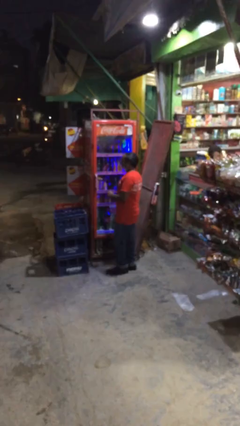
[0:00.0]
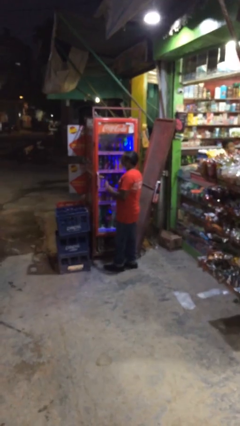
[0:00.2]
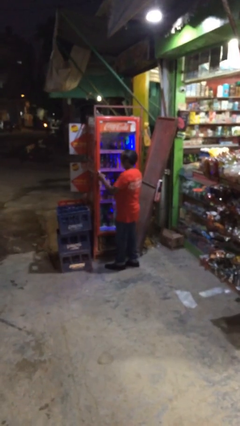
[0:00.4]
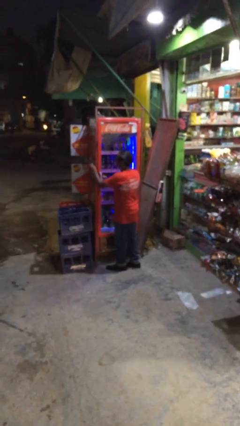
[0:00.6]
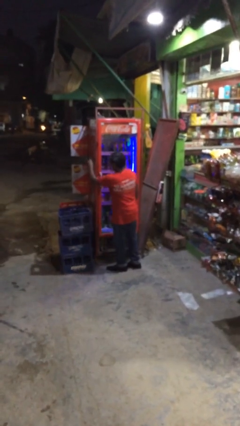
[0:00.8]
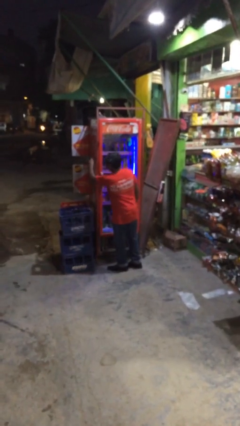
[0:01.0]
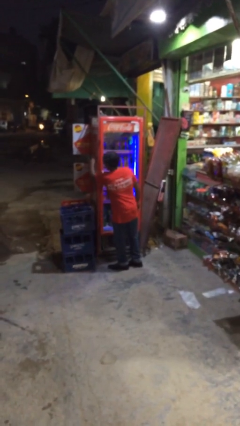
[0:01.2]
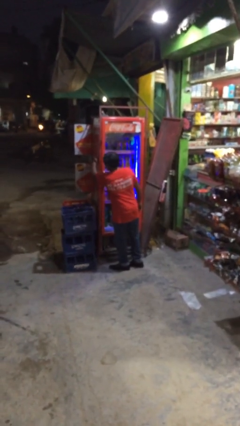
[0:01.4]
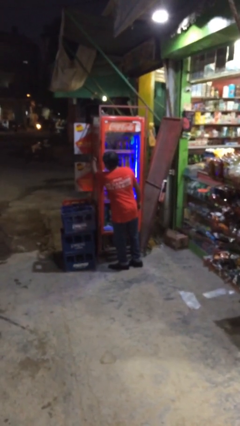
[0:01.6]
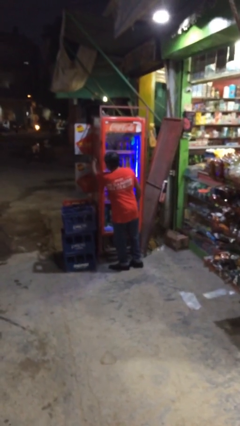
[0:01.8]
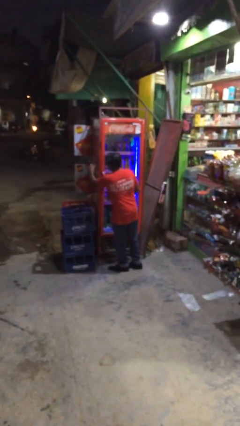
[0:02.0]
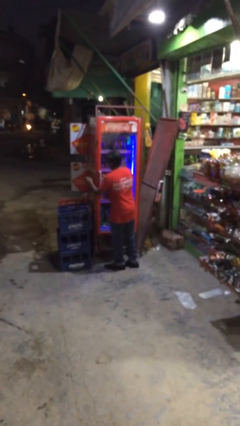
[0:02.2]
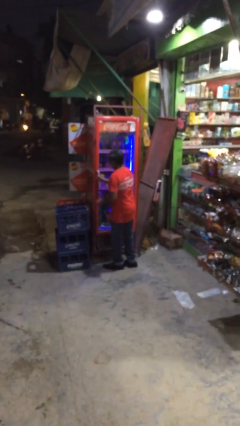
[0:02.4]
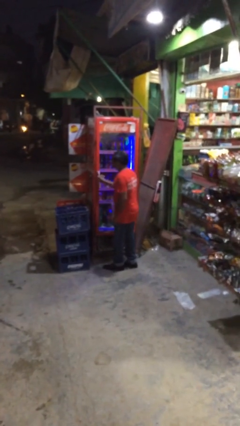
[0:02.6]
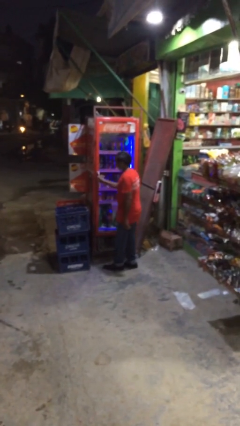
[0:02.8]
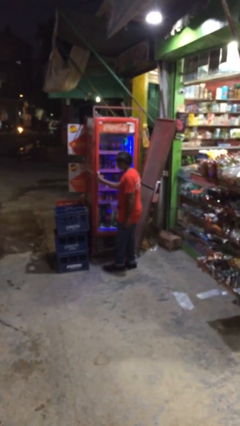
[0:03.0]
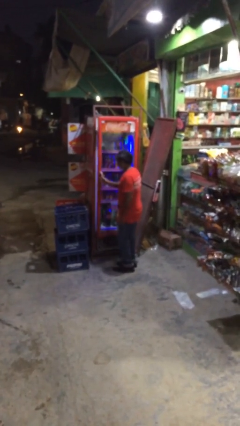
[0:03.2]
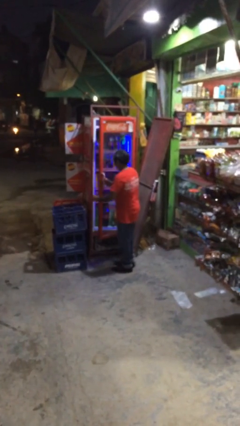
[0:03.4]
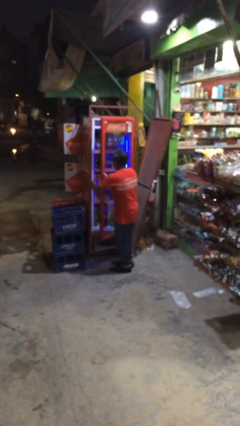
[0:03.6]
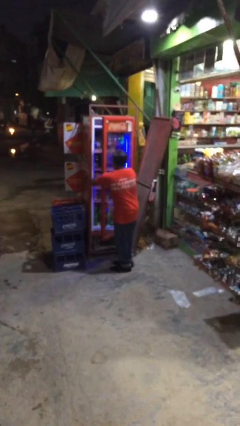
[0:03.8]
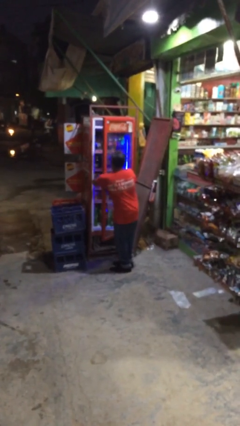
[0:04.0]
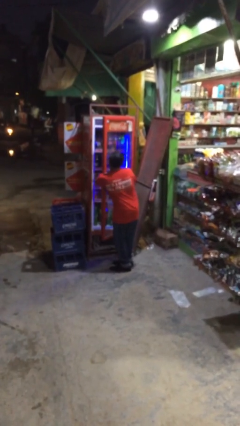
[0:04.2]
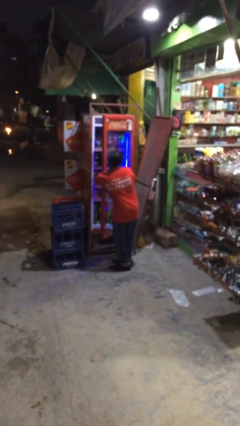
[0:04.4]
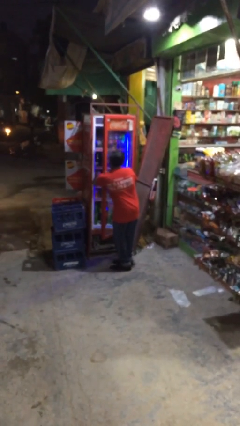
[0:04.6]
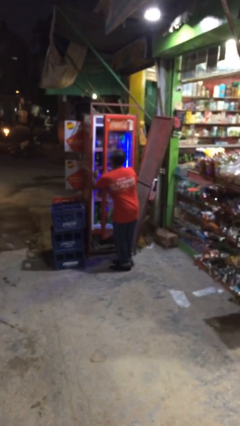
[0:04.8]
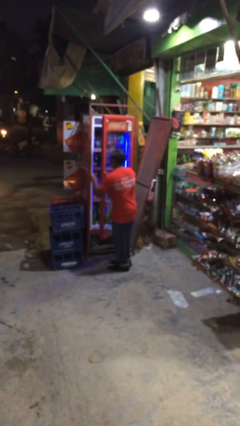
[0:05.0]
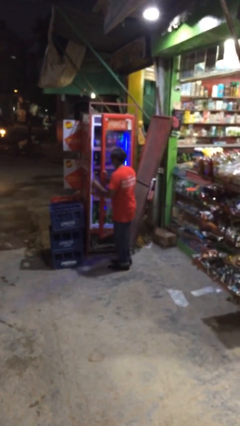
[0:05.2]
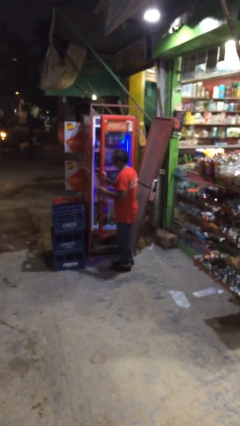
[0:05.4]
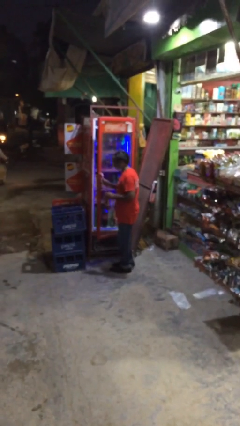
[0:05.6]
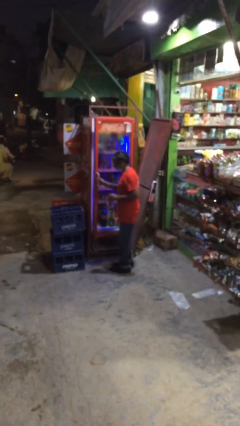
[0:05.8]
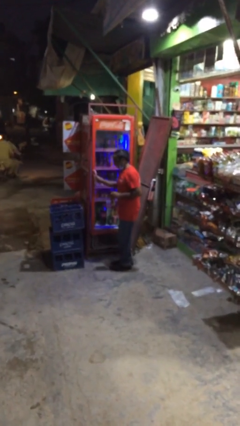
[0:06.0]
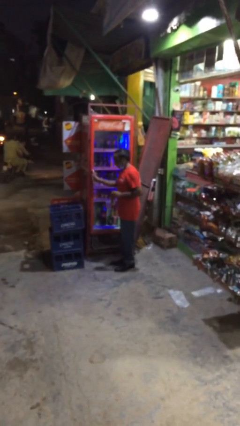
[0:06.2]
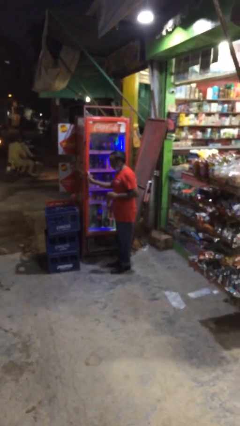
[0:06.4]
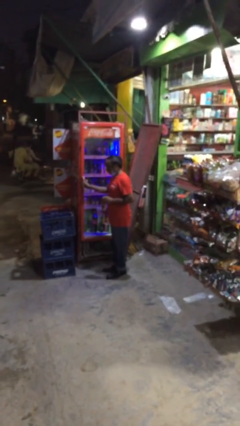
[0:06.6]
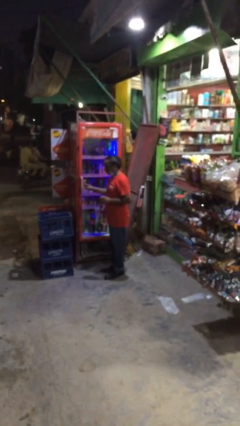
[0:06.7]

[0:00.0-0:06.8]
person purchases from machine

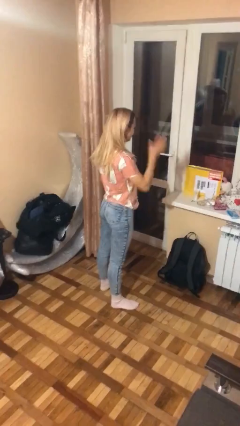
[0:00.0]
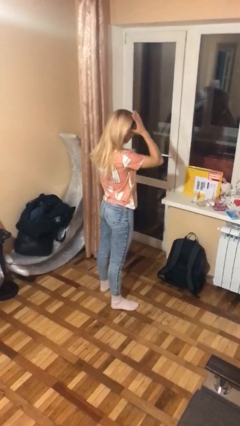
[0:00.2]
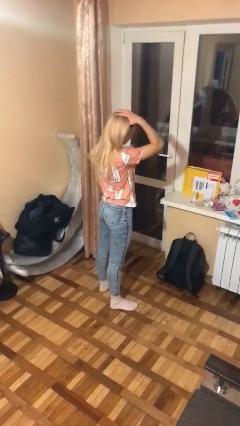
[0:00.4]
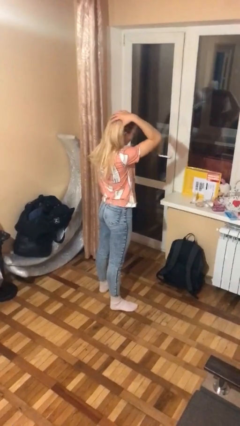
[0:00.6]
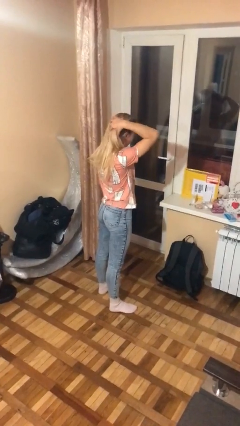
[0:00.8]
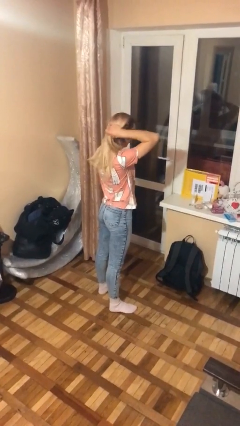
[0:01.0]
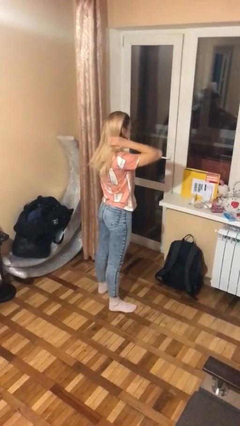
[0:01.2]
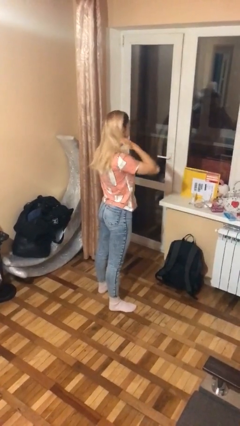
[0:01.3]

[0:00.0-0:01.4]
person strokes hair

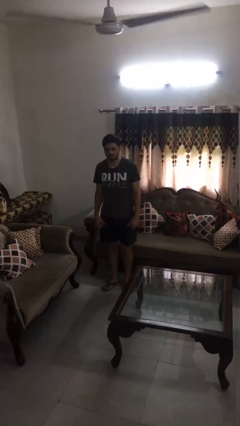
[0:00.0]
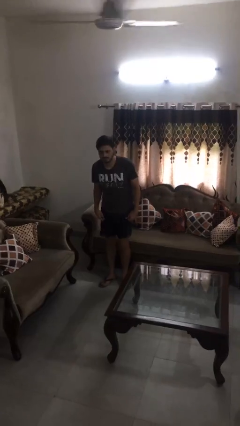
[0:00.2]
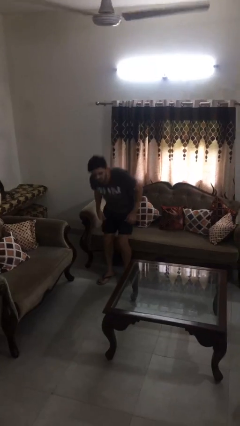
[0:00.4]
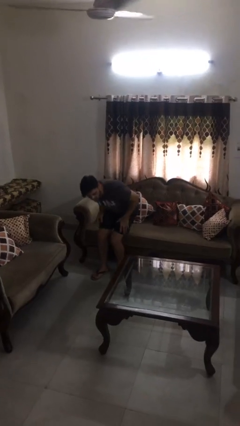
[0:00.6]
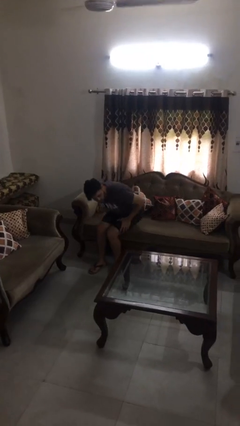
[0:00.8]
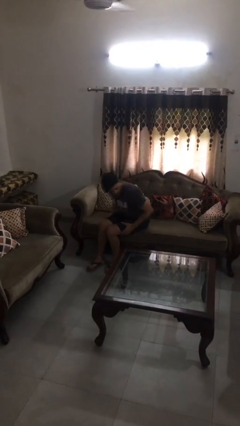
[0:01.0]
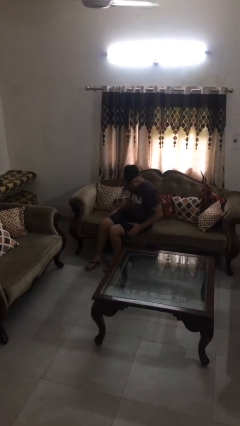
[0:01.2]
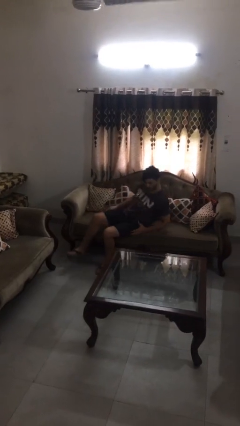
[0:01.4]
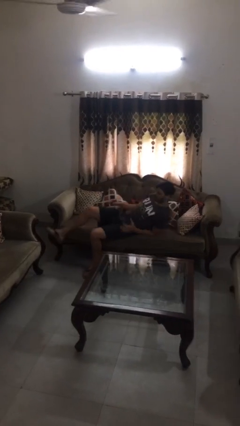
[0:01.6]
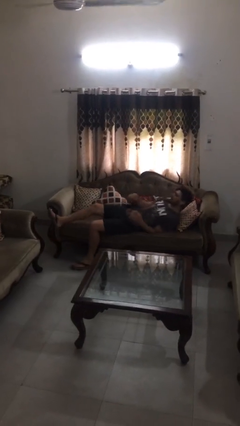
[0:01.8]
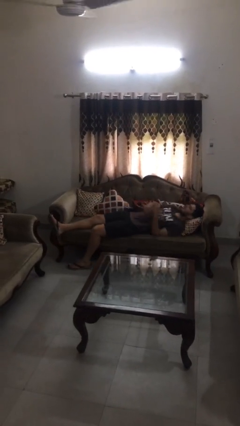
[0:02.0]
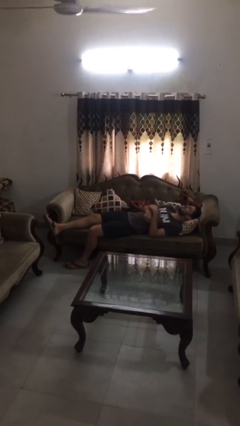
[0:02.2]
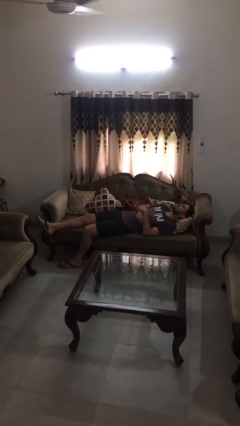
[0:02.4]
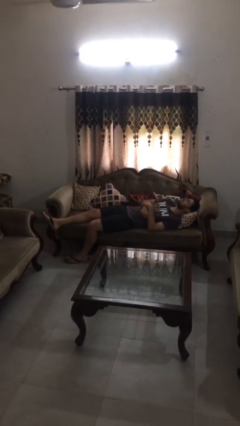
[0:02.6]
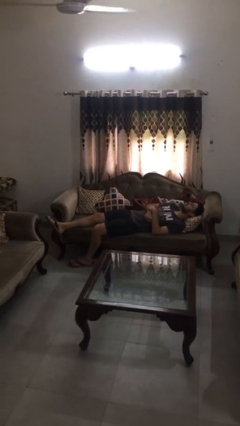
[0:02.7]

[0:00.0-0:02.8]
person lies down on couch

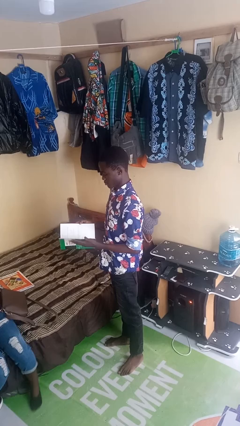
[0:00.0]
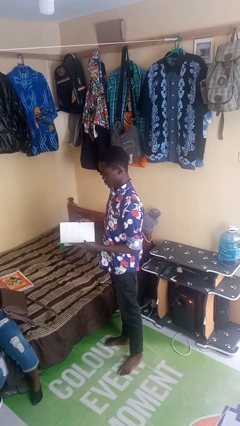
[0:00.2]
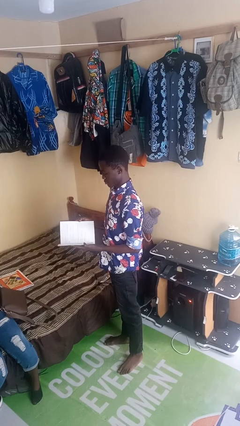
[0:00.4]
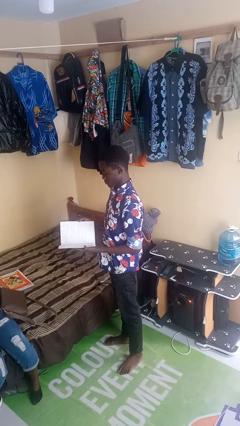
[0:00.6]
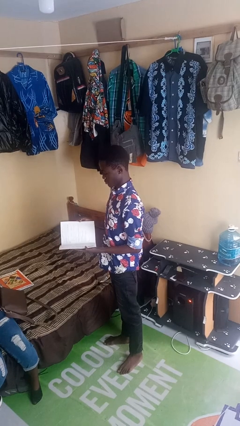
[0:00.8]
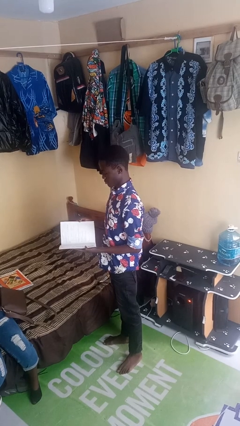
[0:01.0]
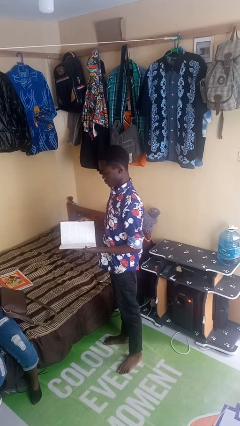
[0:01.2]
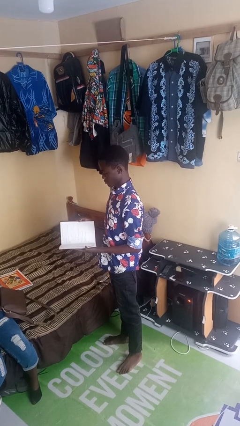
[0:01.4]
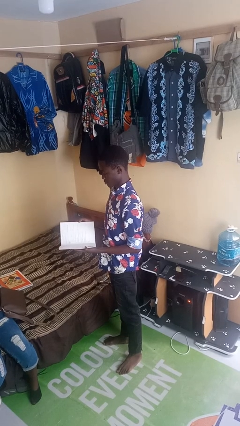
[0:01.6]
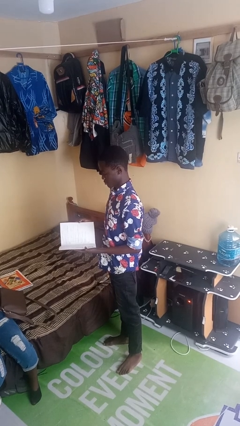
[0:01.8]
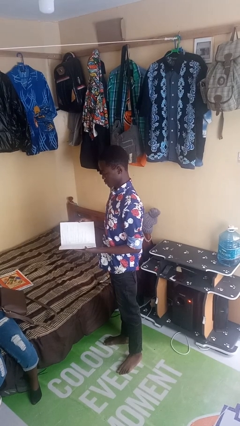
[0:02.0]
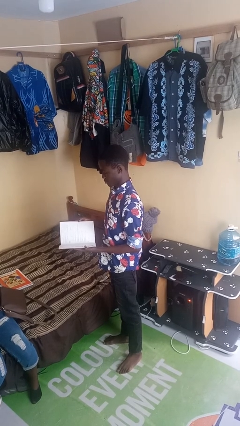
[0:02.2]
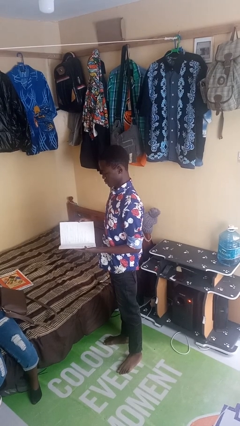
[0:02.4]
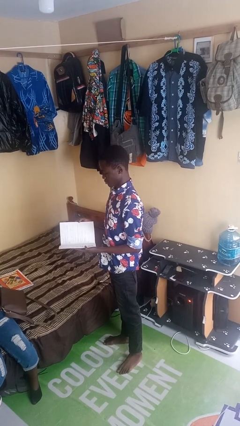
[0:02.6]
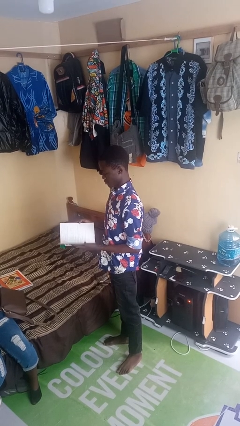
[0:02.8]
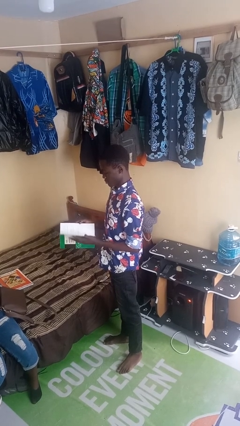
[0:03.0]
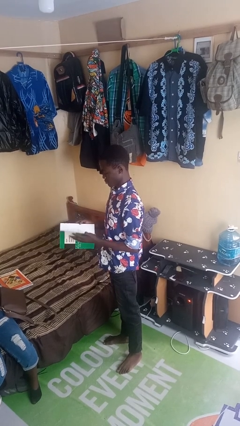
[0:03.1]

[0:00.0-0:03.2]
person reads magazine

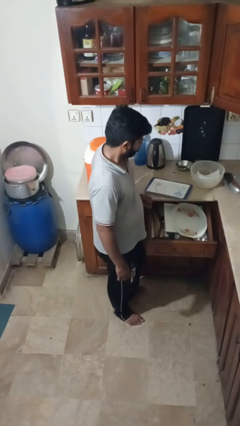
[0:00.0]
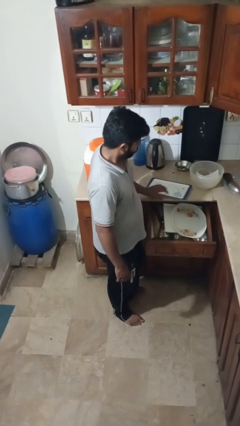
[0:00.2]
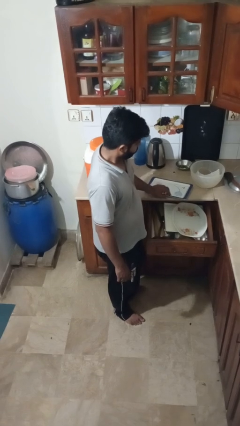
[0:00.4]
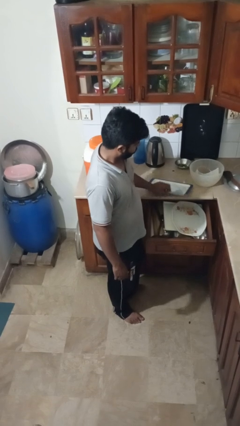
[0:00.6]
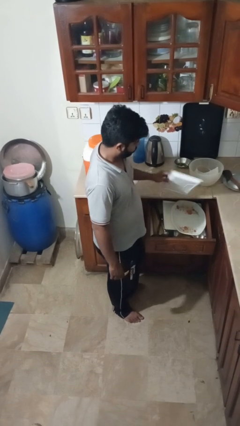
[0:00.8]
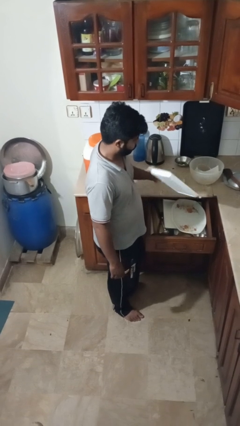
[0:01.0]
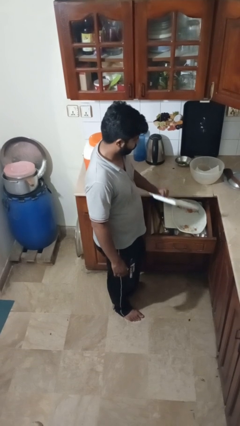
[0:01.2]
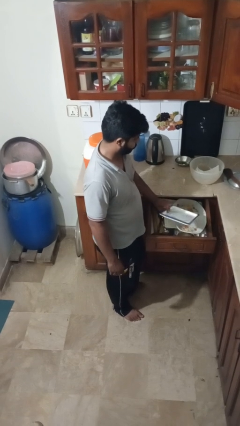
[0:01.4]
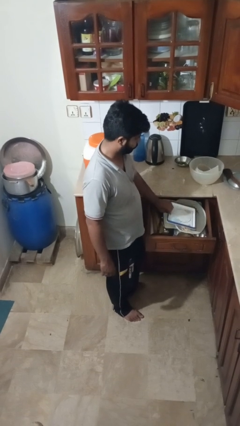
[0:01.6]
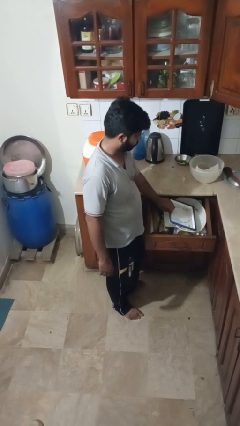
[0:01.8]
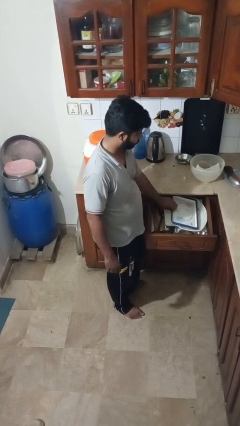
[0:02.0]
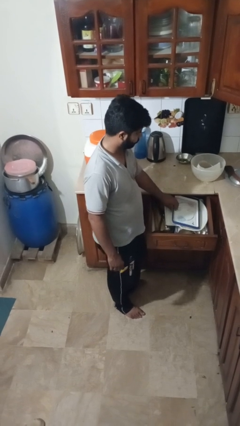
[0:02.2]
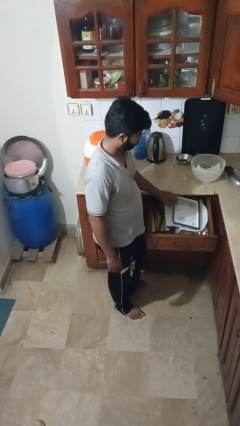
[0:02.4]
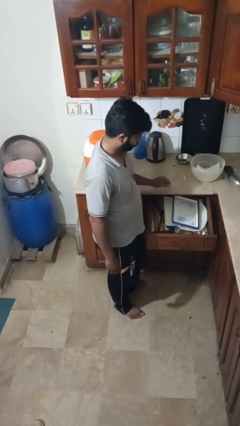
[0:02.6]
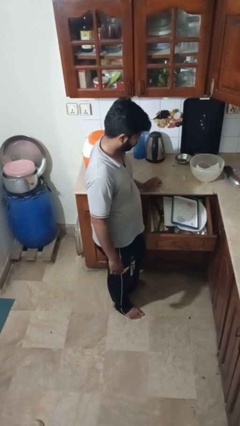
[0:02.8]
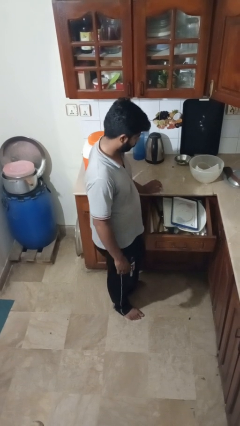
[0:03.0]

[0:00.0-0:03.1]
person puts object into kitchen drawer

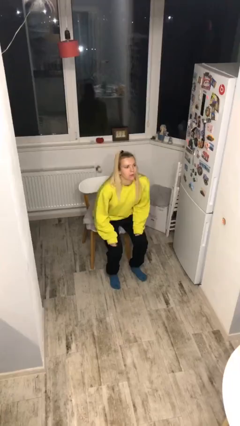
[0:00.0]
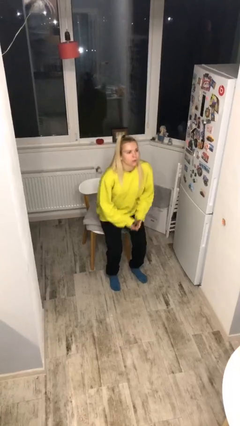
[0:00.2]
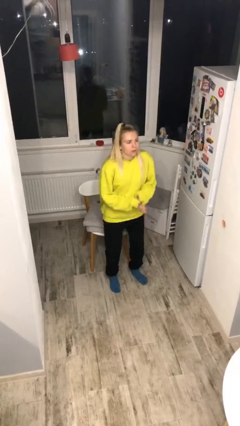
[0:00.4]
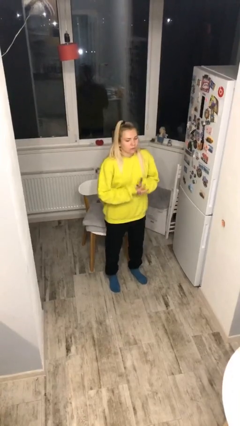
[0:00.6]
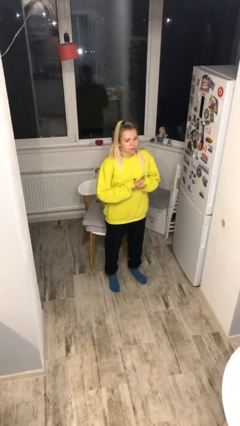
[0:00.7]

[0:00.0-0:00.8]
person stands up
